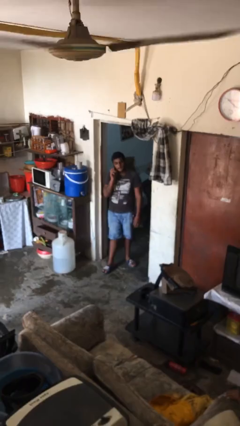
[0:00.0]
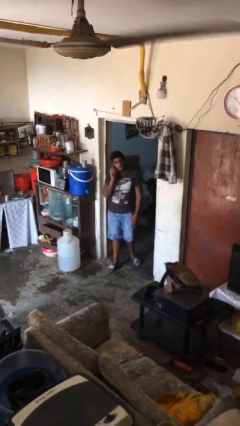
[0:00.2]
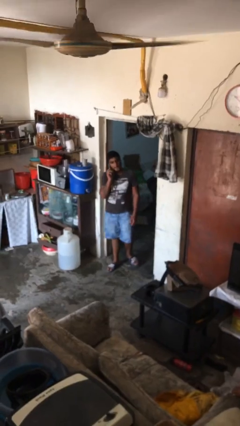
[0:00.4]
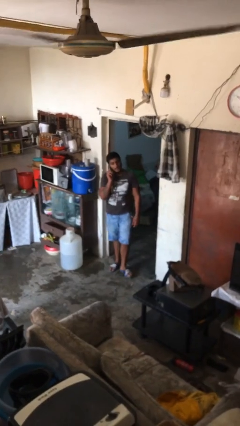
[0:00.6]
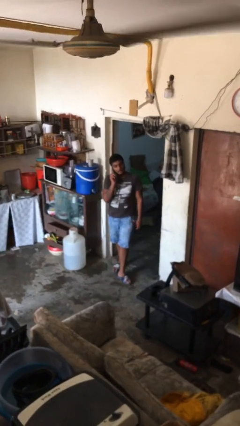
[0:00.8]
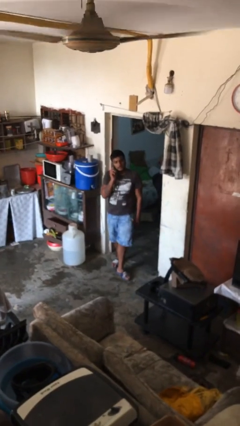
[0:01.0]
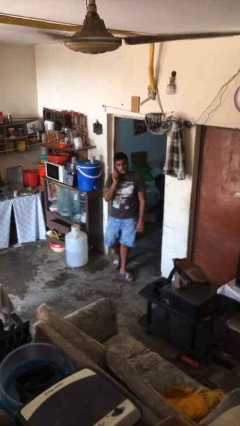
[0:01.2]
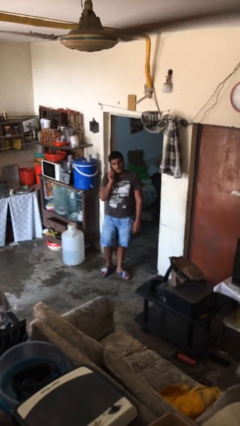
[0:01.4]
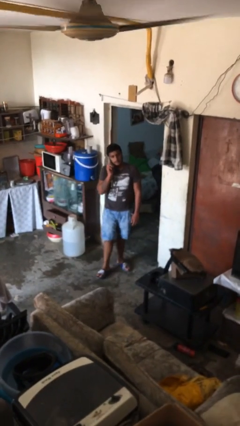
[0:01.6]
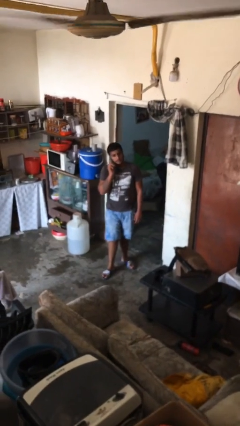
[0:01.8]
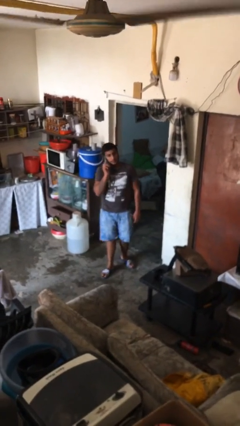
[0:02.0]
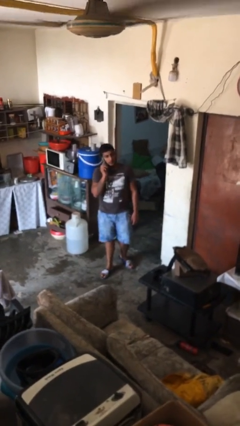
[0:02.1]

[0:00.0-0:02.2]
person enters scene through structure

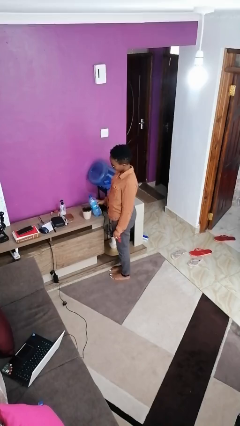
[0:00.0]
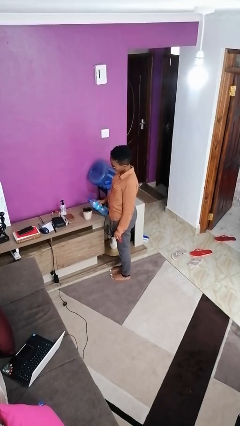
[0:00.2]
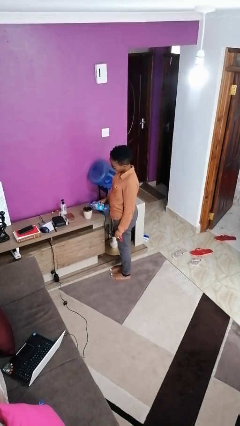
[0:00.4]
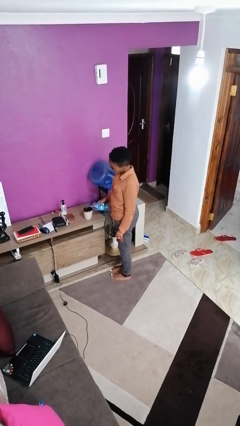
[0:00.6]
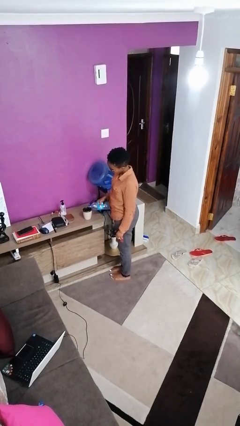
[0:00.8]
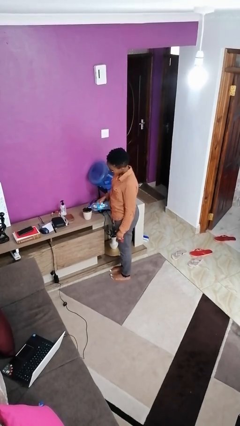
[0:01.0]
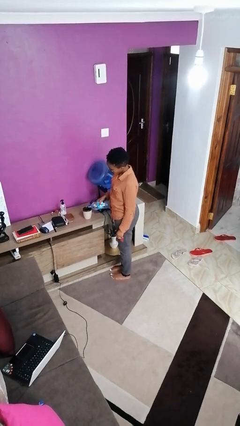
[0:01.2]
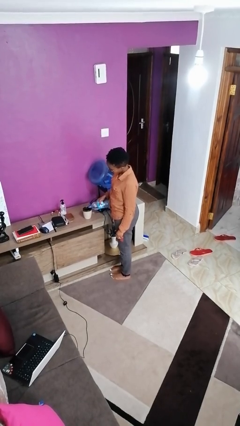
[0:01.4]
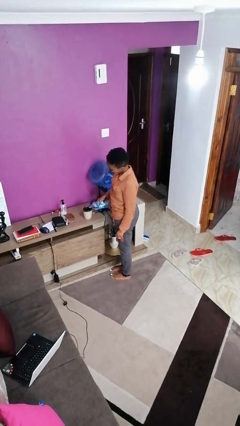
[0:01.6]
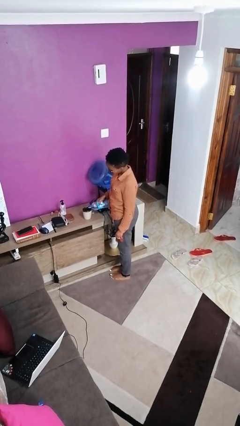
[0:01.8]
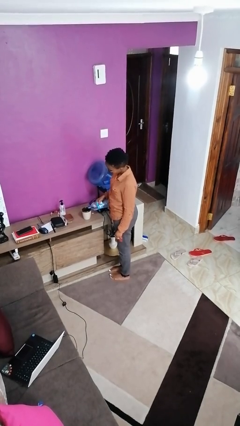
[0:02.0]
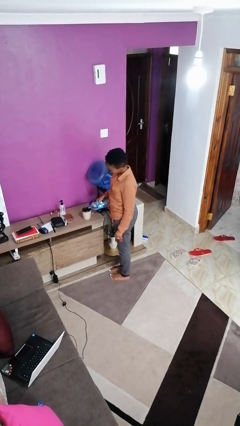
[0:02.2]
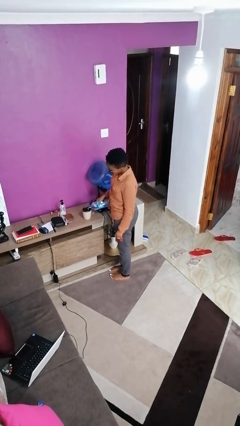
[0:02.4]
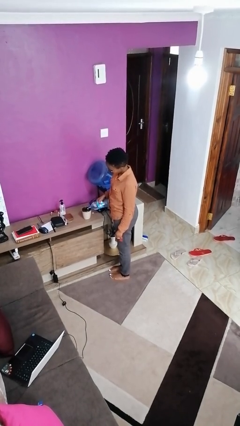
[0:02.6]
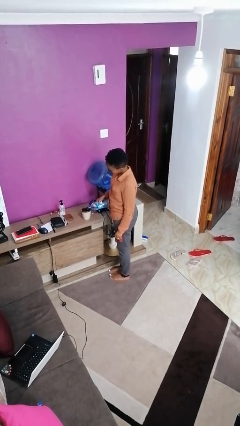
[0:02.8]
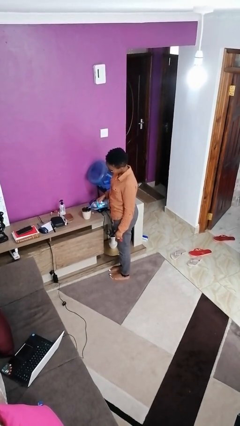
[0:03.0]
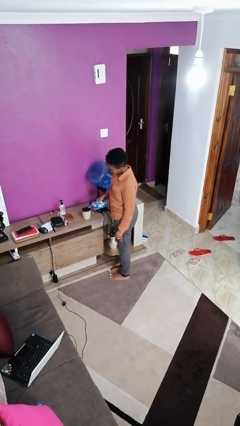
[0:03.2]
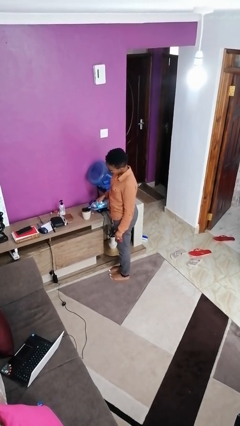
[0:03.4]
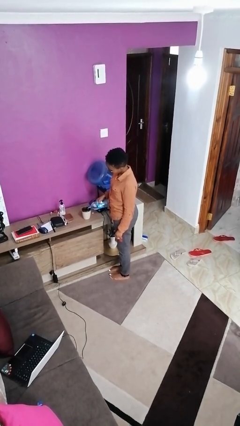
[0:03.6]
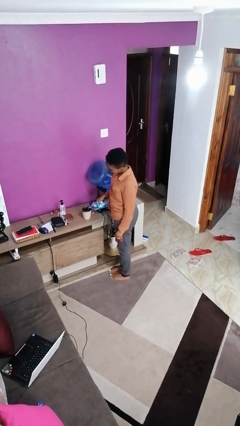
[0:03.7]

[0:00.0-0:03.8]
person pours liquid into cup

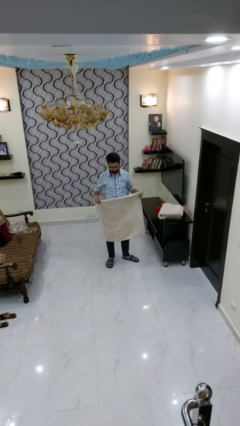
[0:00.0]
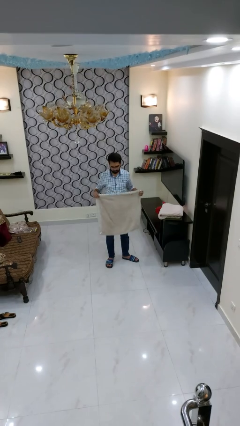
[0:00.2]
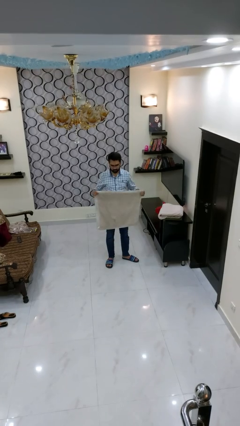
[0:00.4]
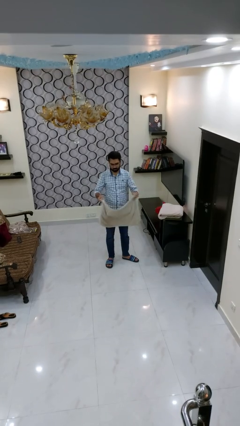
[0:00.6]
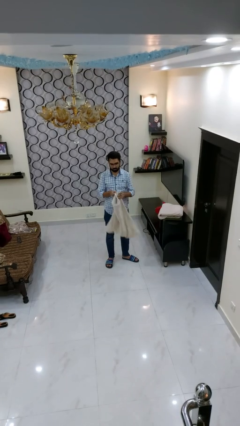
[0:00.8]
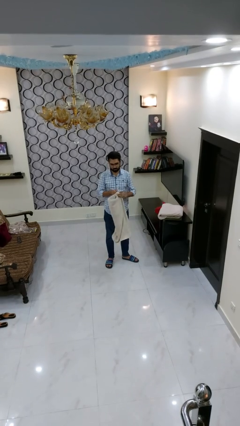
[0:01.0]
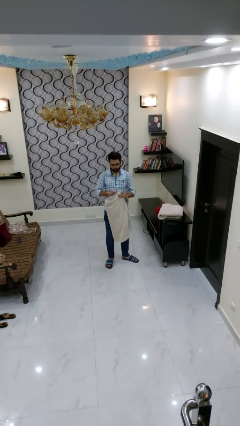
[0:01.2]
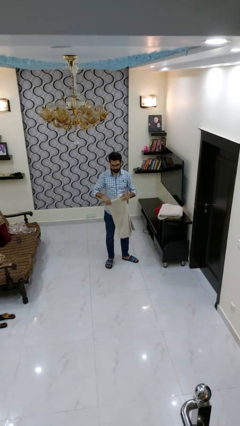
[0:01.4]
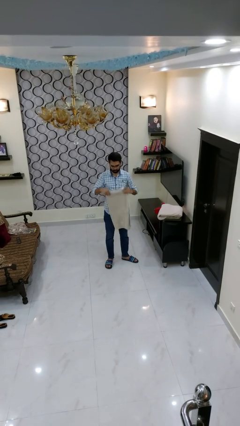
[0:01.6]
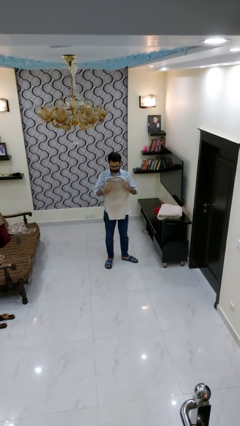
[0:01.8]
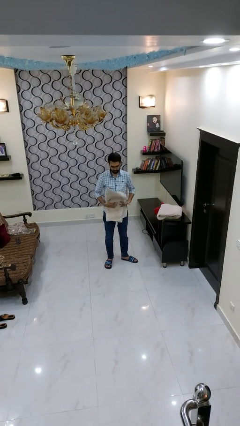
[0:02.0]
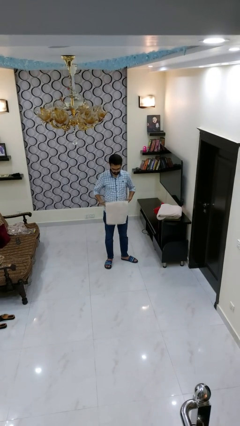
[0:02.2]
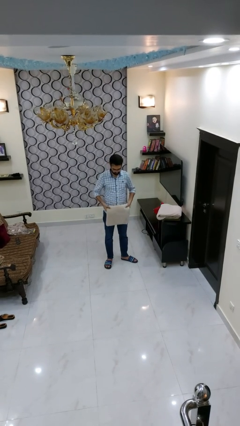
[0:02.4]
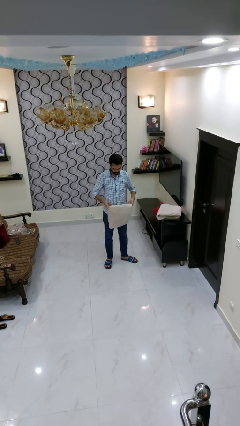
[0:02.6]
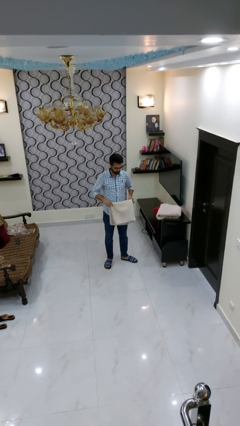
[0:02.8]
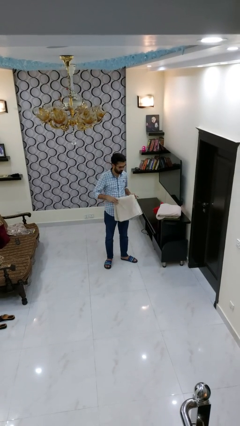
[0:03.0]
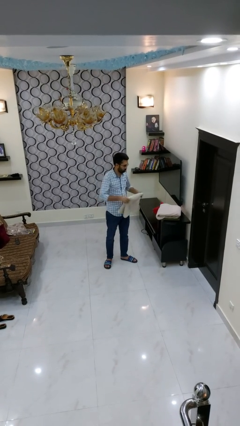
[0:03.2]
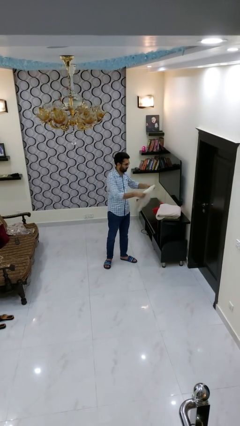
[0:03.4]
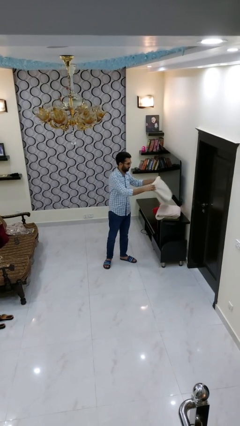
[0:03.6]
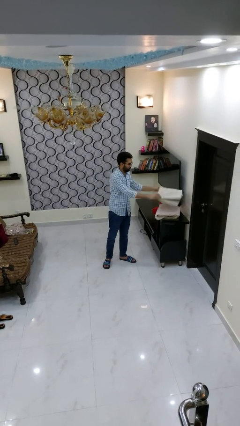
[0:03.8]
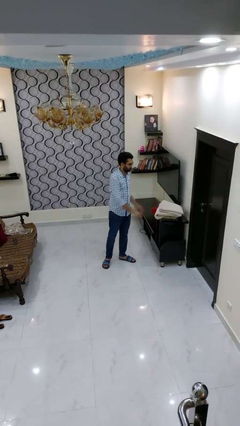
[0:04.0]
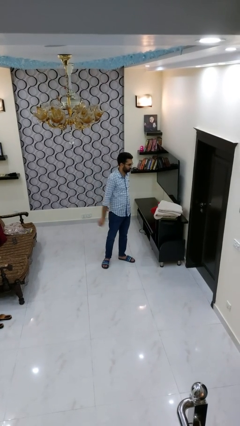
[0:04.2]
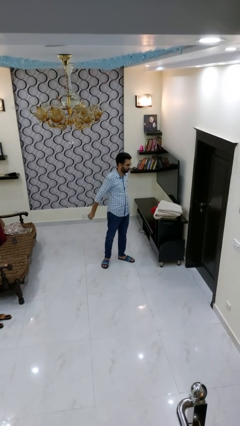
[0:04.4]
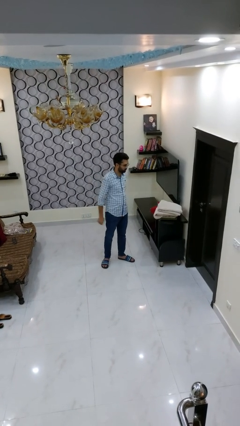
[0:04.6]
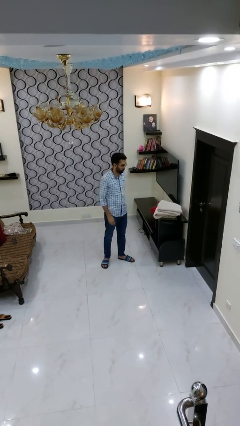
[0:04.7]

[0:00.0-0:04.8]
person folds towel

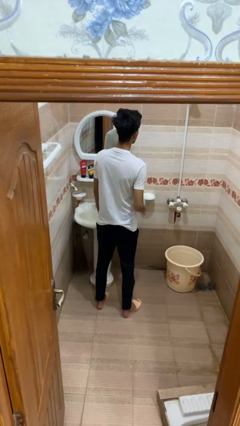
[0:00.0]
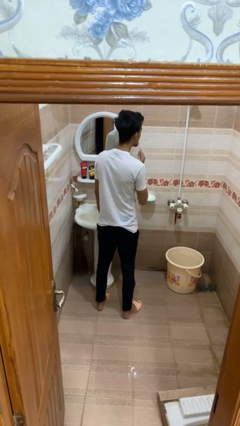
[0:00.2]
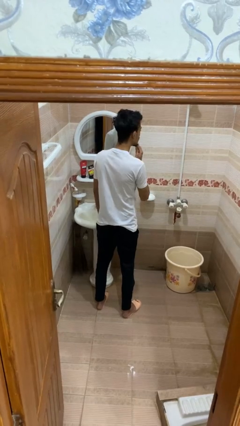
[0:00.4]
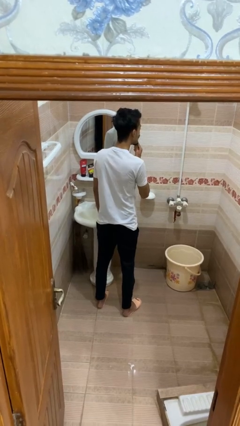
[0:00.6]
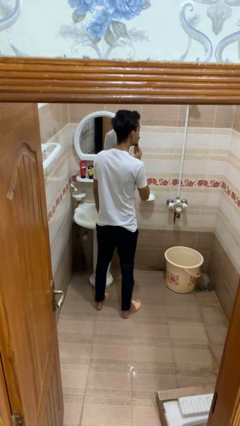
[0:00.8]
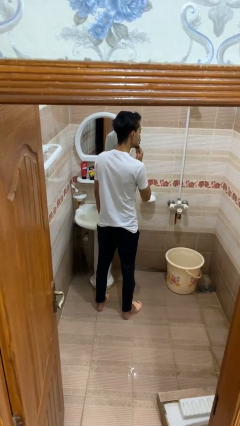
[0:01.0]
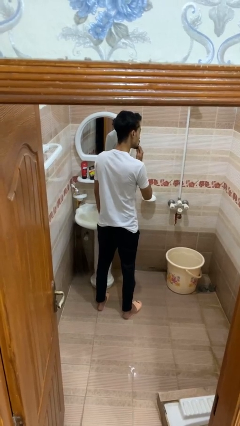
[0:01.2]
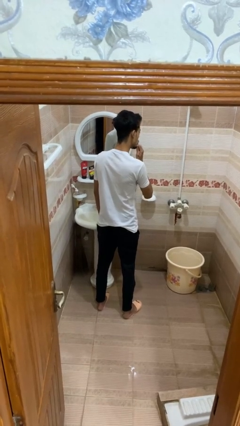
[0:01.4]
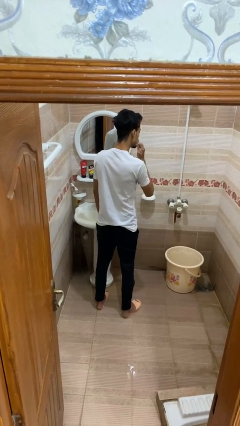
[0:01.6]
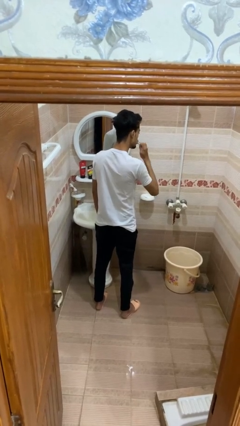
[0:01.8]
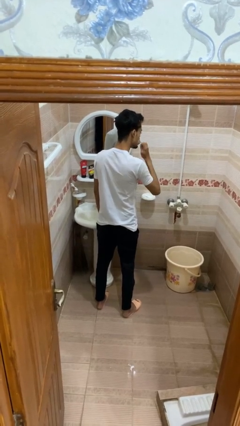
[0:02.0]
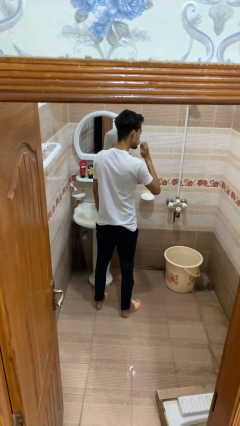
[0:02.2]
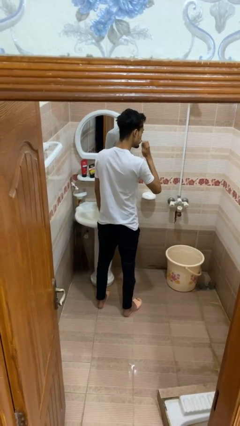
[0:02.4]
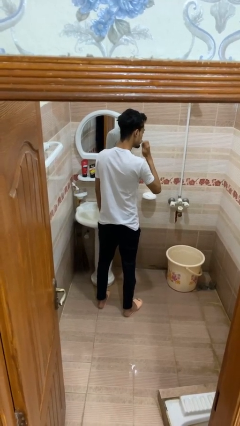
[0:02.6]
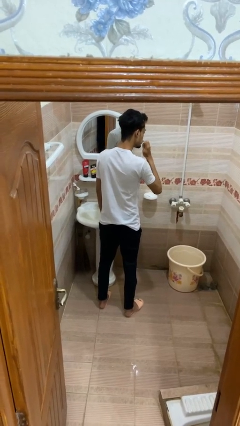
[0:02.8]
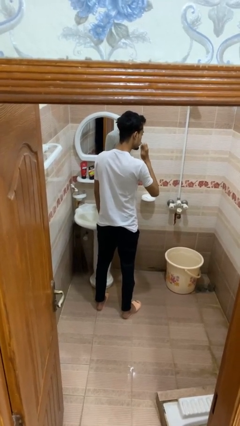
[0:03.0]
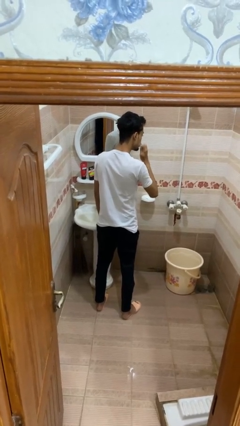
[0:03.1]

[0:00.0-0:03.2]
person brushes teeth

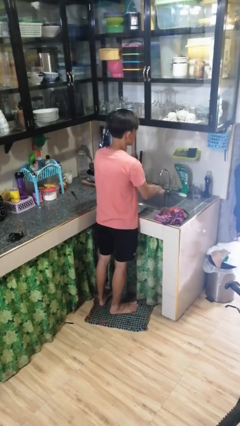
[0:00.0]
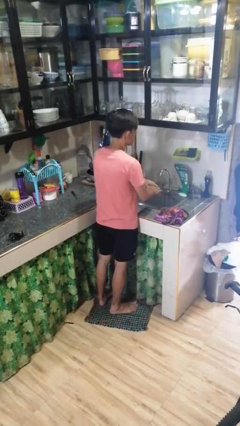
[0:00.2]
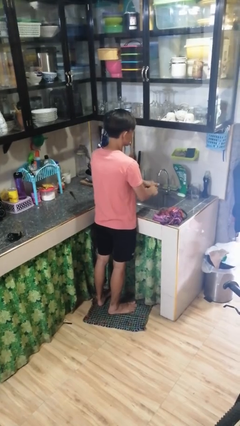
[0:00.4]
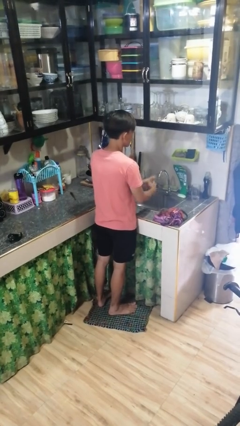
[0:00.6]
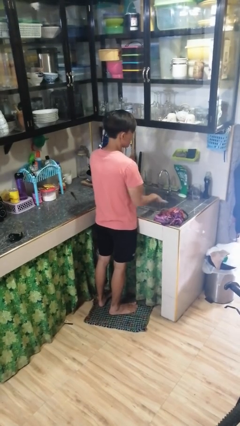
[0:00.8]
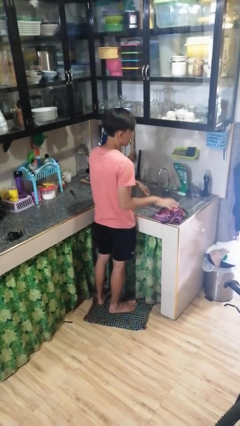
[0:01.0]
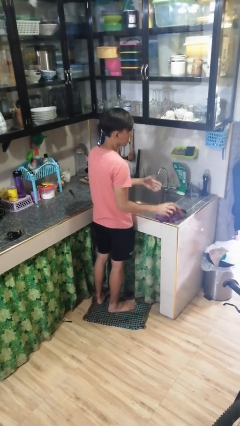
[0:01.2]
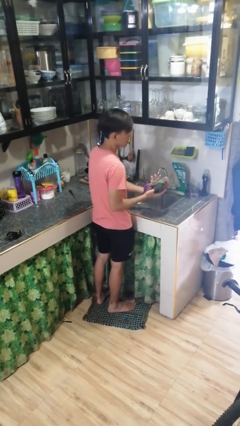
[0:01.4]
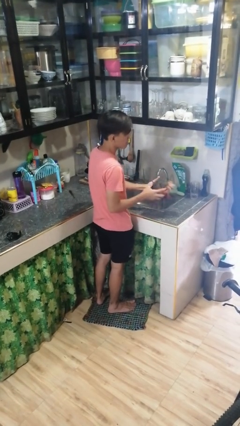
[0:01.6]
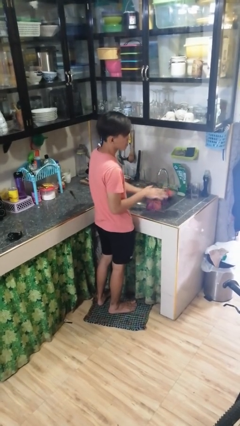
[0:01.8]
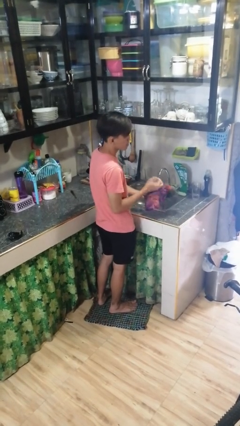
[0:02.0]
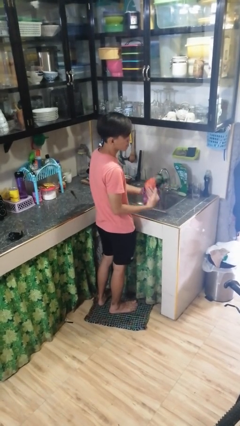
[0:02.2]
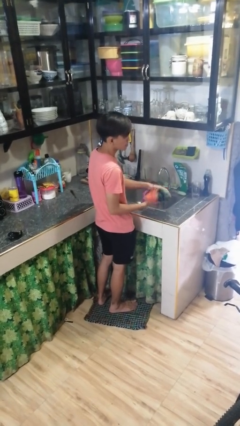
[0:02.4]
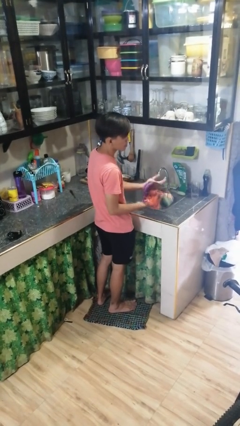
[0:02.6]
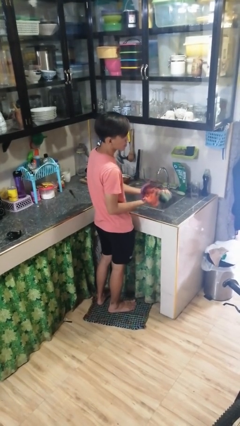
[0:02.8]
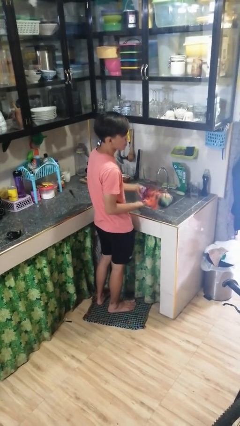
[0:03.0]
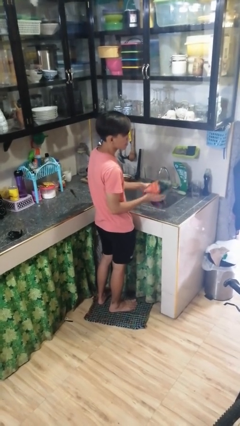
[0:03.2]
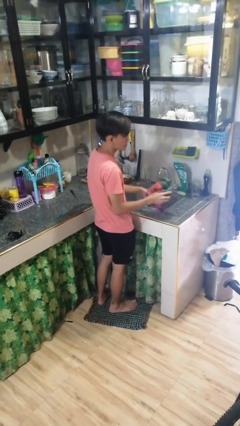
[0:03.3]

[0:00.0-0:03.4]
person dries hands with towel
